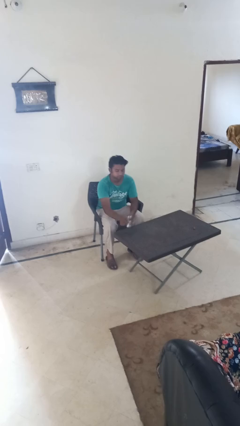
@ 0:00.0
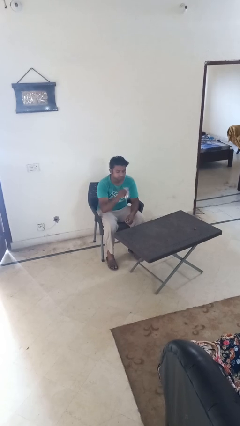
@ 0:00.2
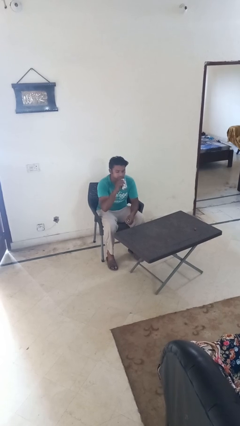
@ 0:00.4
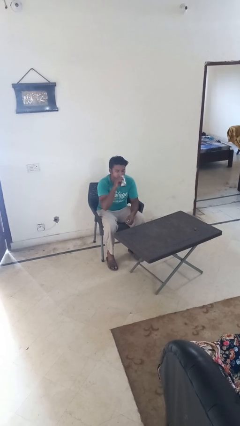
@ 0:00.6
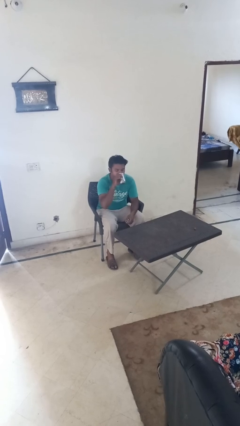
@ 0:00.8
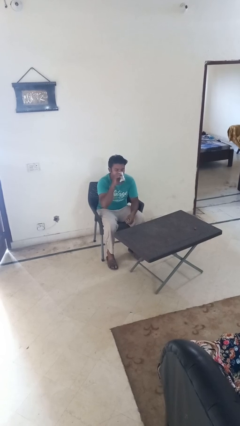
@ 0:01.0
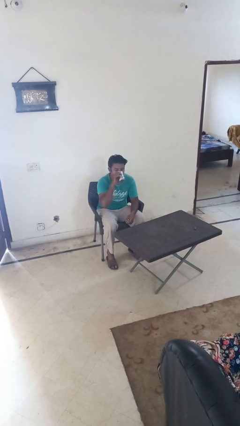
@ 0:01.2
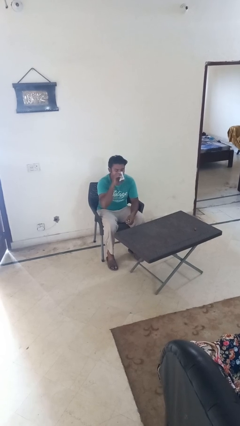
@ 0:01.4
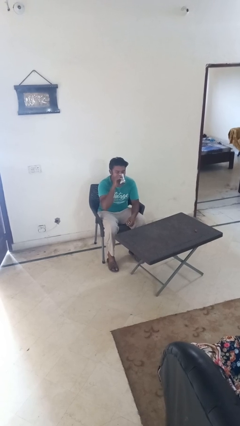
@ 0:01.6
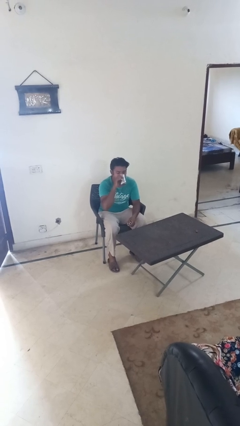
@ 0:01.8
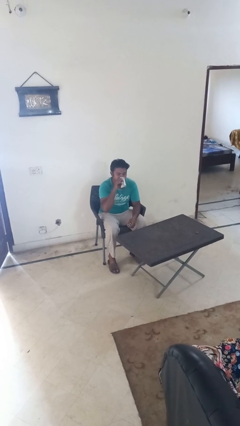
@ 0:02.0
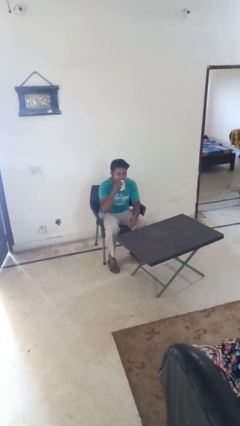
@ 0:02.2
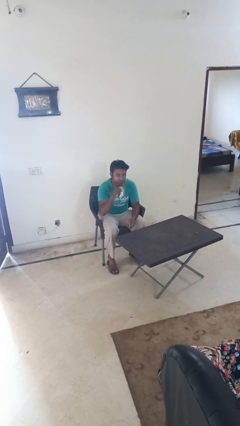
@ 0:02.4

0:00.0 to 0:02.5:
person drinks from cup

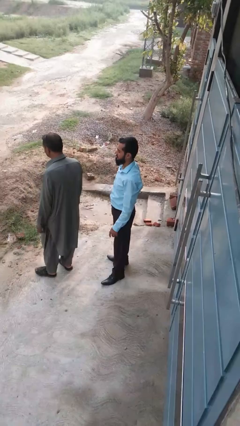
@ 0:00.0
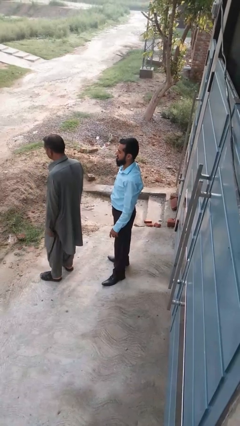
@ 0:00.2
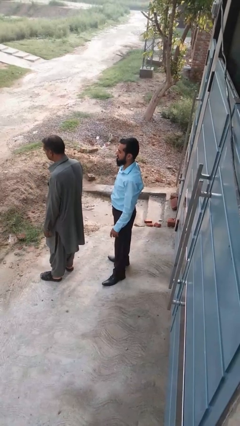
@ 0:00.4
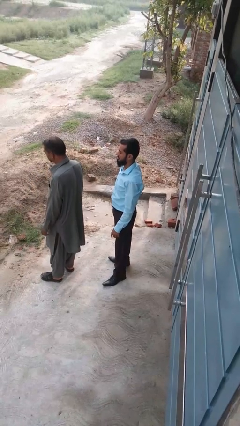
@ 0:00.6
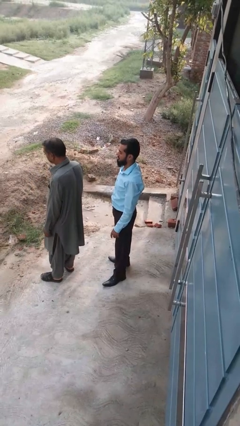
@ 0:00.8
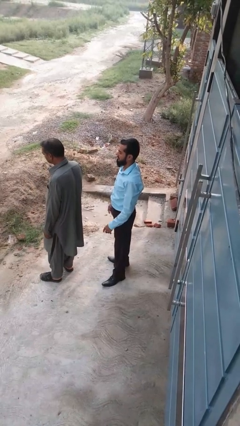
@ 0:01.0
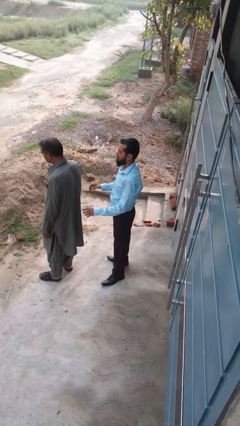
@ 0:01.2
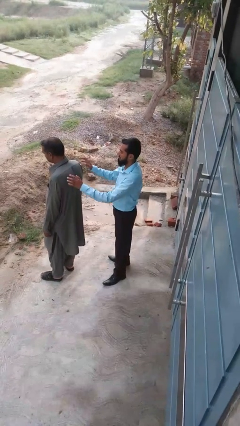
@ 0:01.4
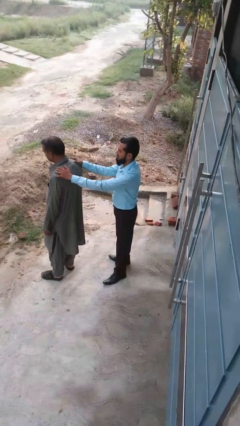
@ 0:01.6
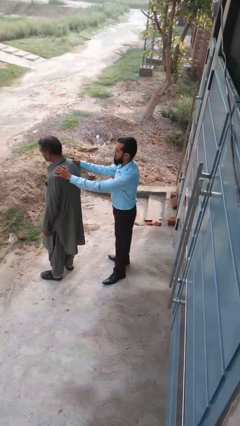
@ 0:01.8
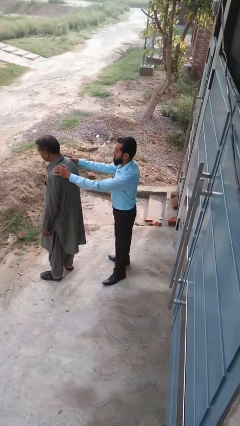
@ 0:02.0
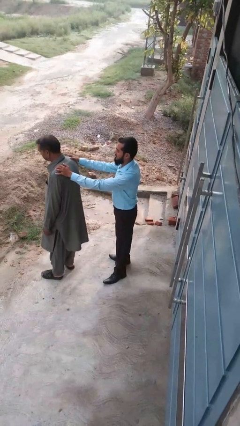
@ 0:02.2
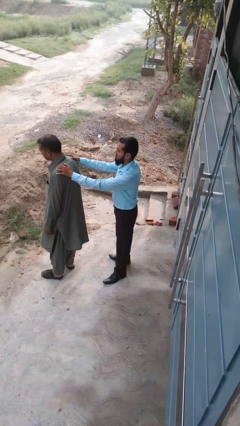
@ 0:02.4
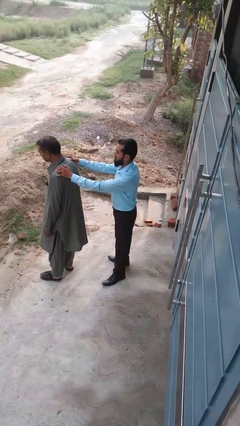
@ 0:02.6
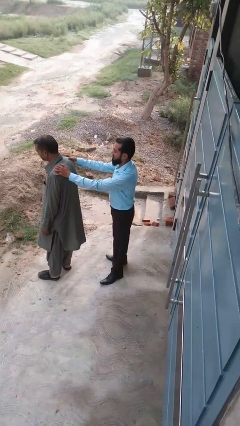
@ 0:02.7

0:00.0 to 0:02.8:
person grabs person by shoulder

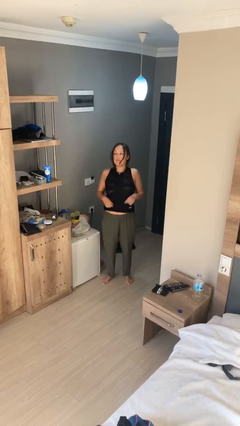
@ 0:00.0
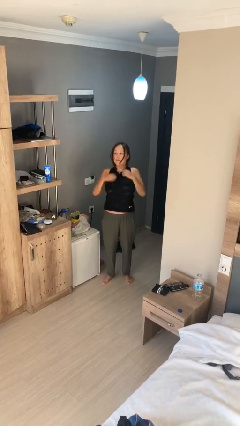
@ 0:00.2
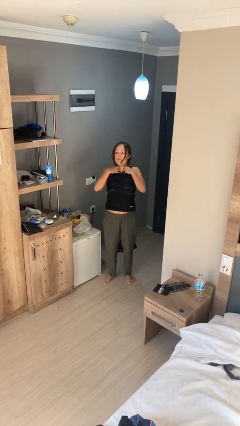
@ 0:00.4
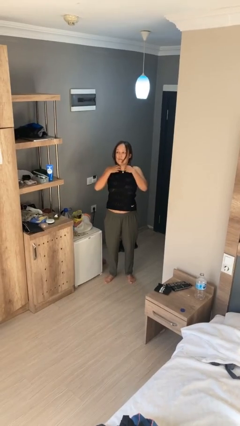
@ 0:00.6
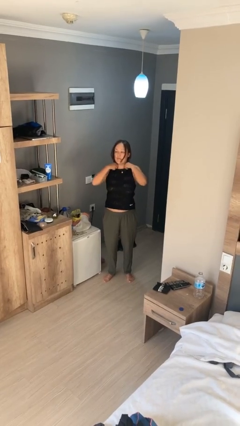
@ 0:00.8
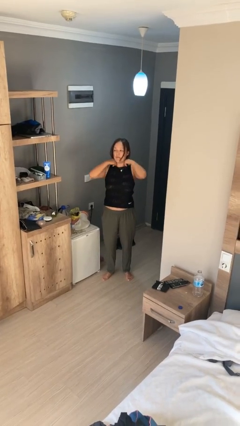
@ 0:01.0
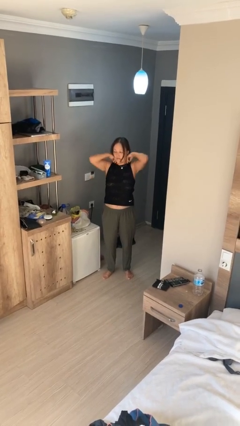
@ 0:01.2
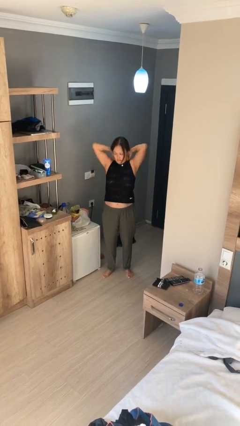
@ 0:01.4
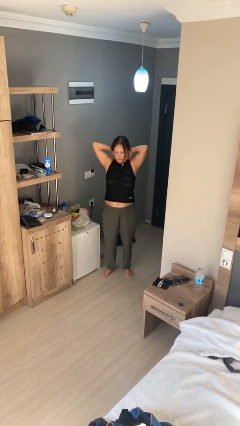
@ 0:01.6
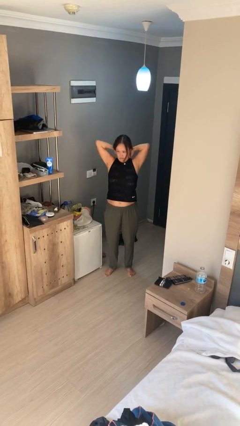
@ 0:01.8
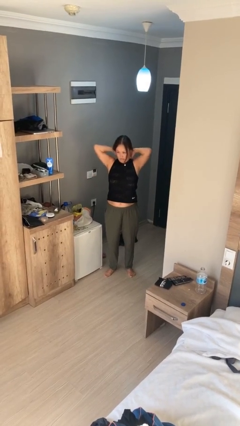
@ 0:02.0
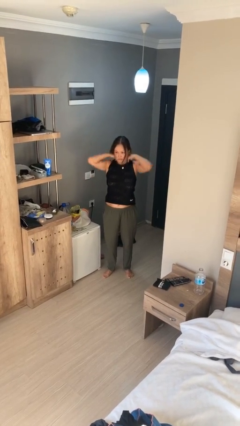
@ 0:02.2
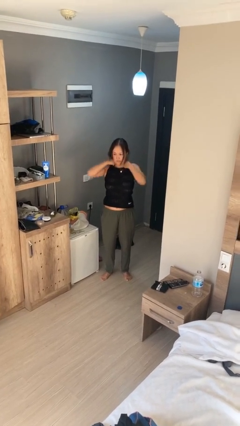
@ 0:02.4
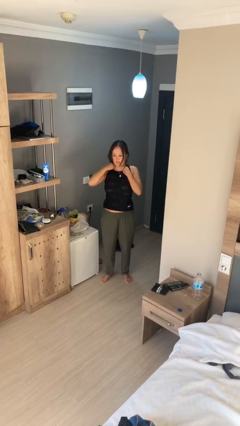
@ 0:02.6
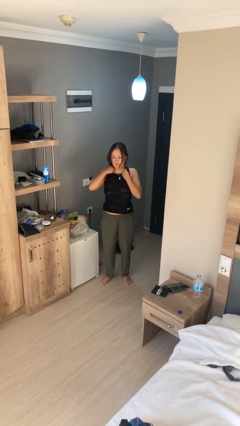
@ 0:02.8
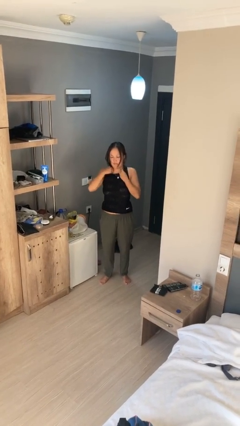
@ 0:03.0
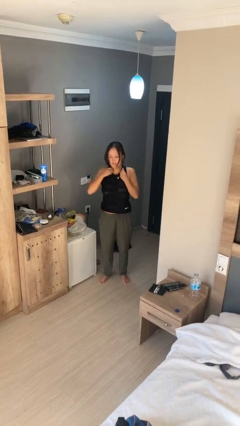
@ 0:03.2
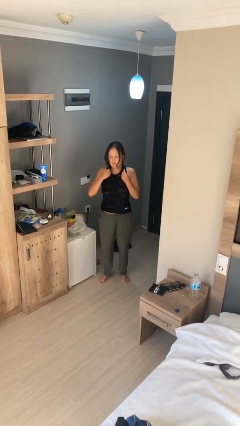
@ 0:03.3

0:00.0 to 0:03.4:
person takes off necklace

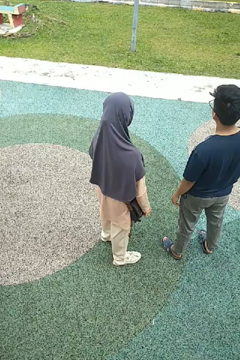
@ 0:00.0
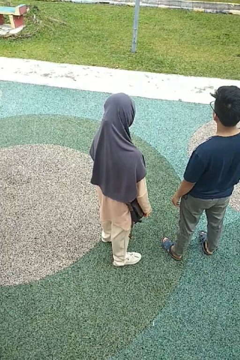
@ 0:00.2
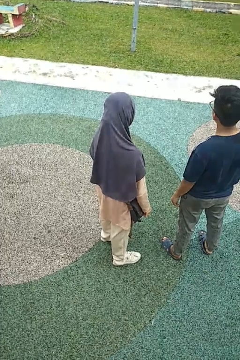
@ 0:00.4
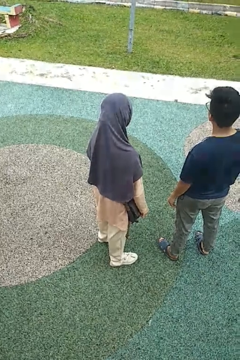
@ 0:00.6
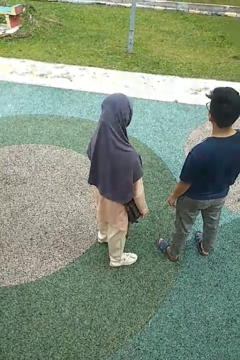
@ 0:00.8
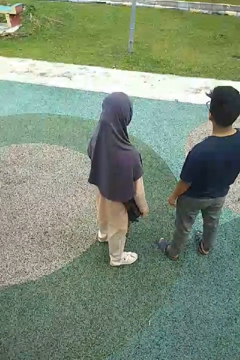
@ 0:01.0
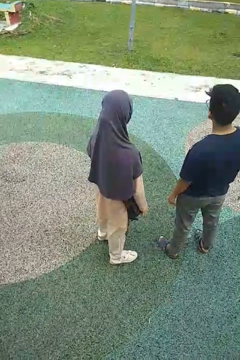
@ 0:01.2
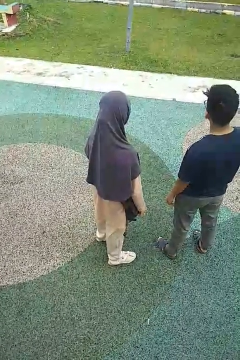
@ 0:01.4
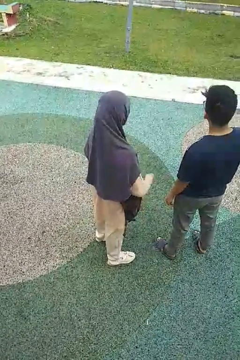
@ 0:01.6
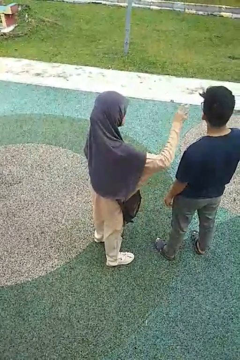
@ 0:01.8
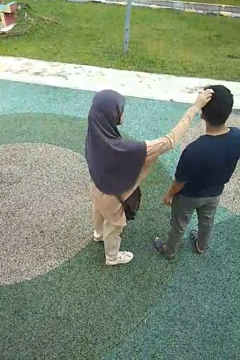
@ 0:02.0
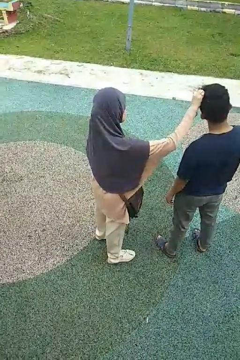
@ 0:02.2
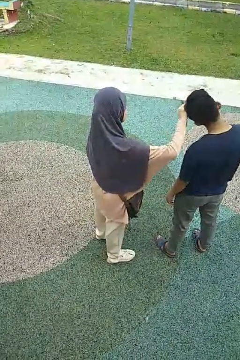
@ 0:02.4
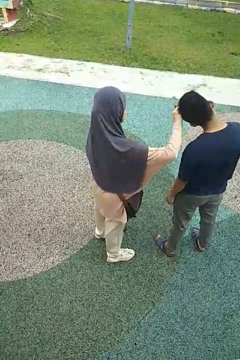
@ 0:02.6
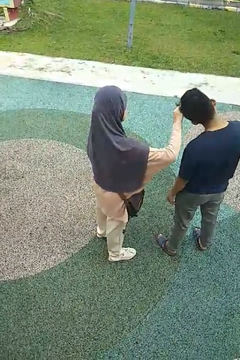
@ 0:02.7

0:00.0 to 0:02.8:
person grabs person by hair

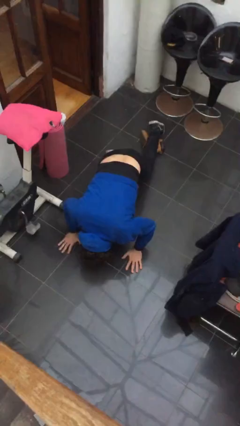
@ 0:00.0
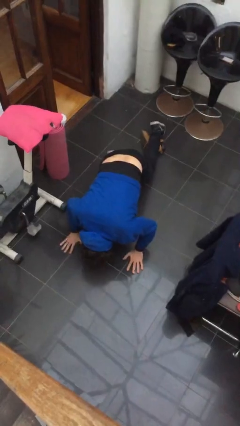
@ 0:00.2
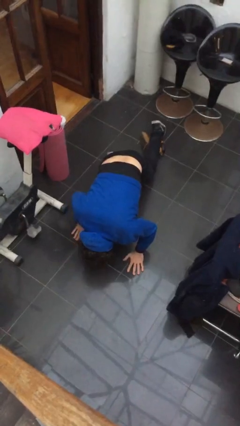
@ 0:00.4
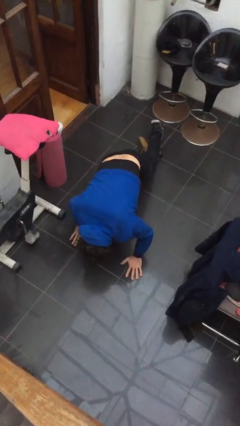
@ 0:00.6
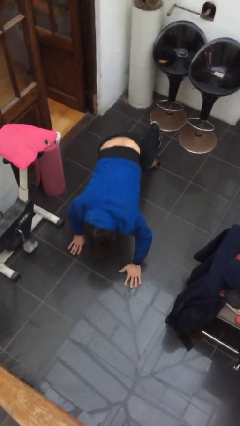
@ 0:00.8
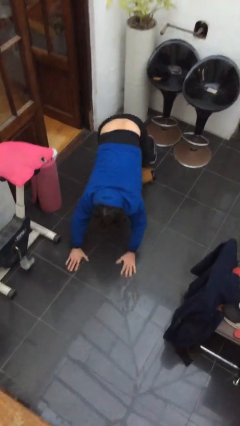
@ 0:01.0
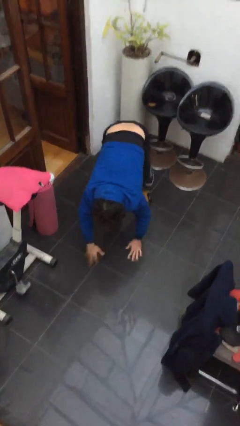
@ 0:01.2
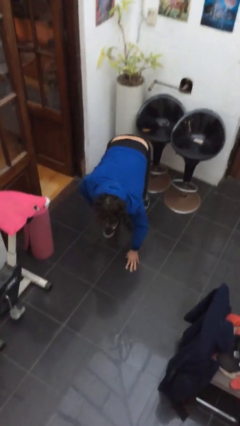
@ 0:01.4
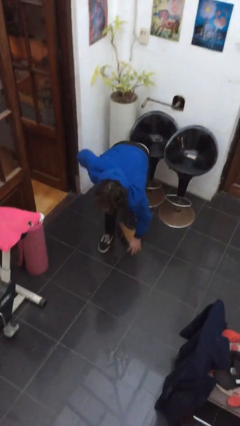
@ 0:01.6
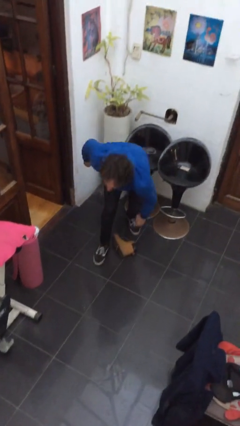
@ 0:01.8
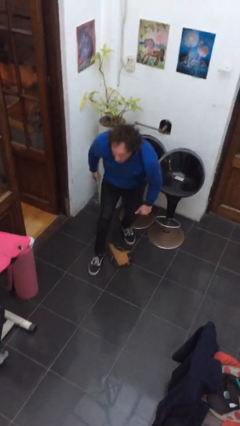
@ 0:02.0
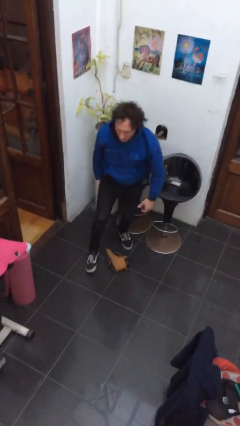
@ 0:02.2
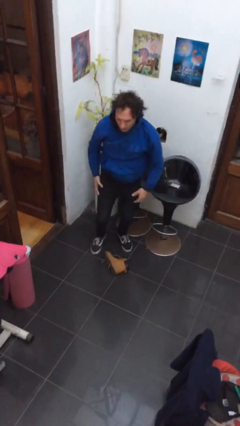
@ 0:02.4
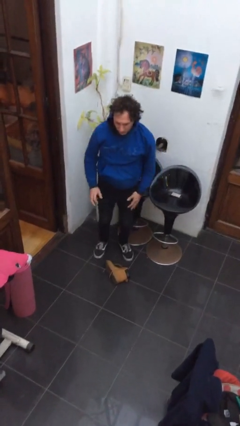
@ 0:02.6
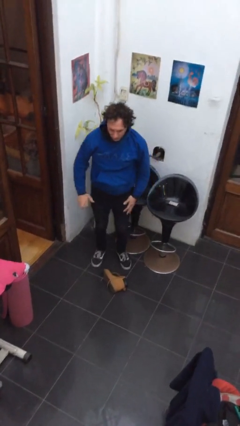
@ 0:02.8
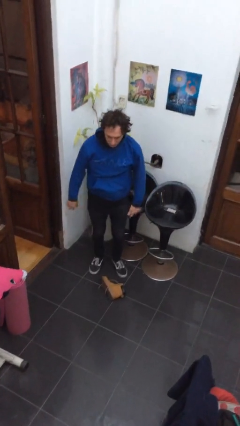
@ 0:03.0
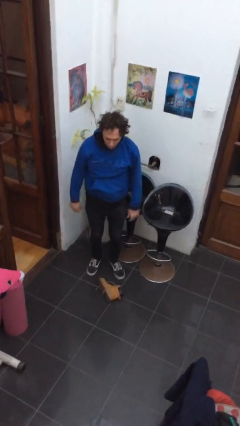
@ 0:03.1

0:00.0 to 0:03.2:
person stands up from floor

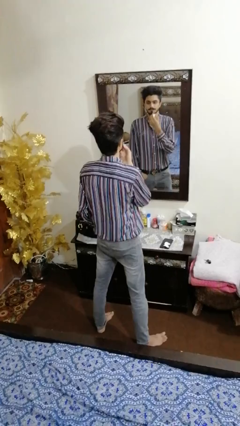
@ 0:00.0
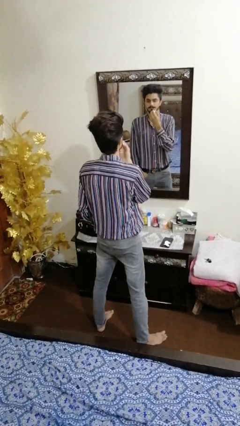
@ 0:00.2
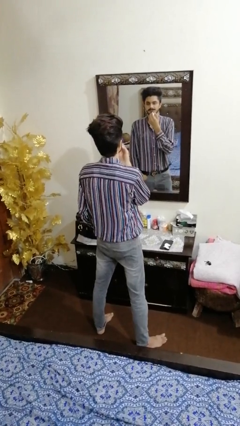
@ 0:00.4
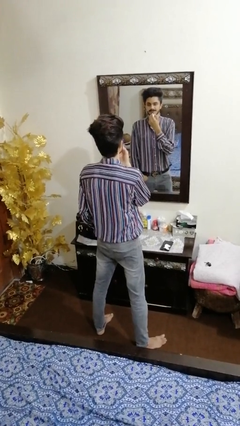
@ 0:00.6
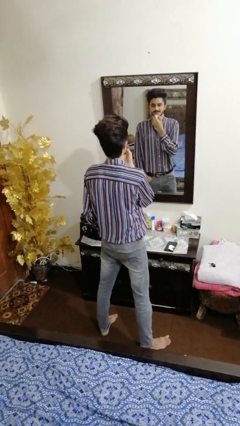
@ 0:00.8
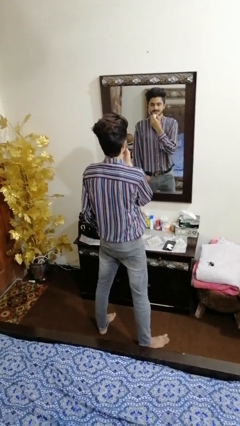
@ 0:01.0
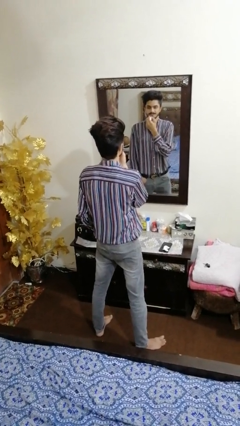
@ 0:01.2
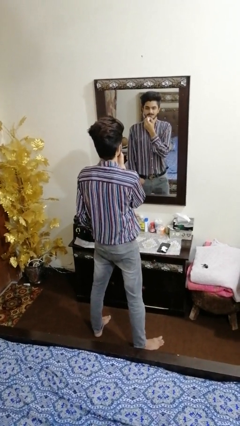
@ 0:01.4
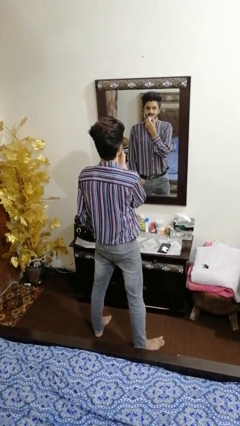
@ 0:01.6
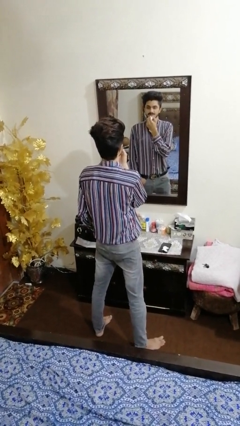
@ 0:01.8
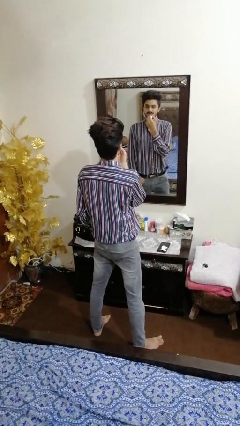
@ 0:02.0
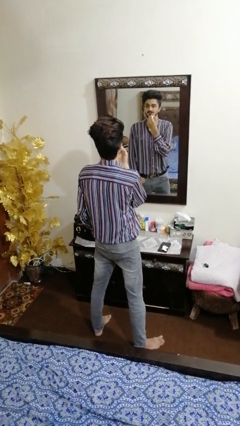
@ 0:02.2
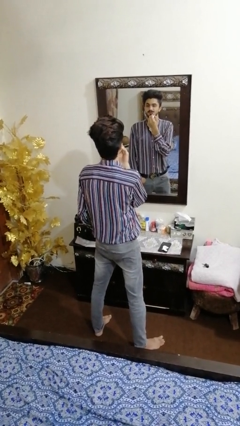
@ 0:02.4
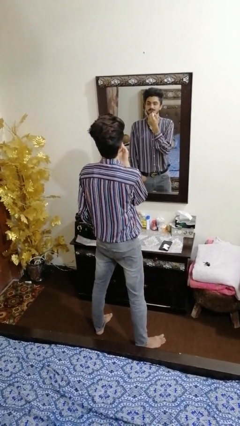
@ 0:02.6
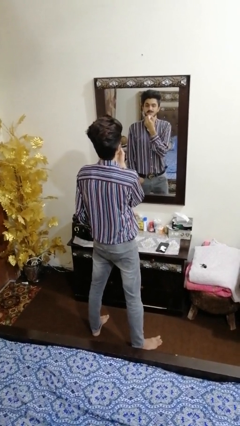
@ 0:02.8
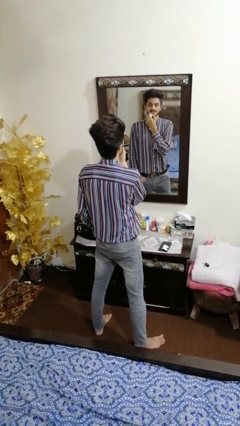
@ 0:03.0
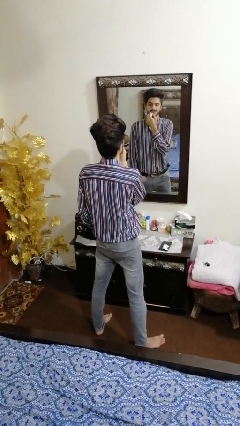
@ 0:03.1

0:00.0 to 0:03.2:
person applies lip makeup
